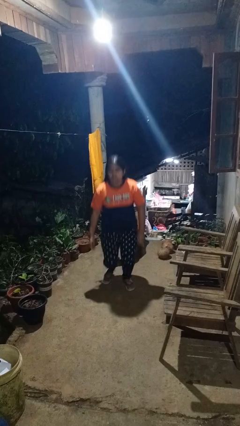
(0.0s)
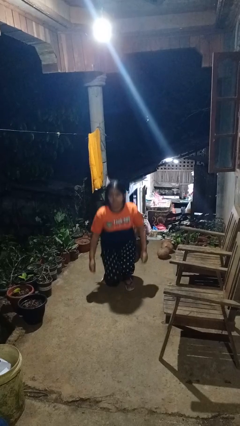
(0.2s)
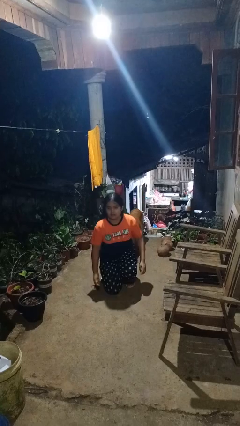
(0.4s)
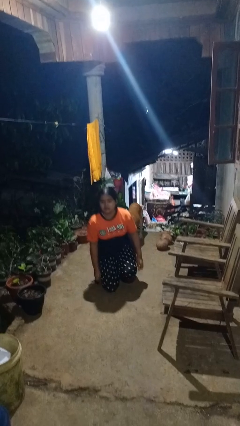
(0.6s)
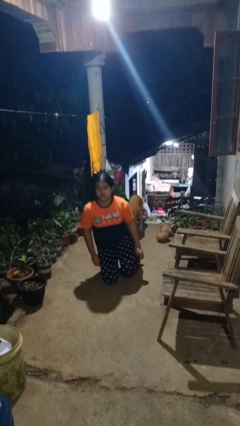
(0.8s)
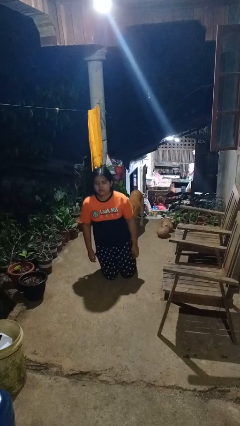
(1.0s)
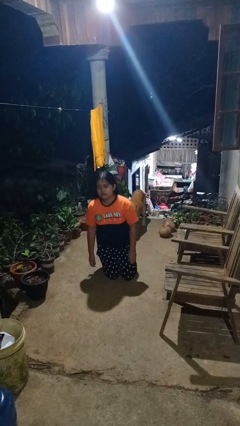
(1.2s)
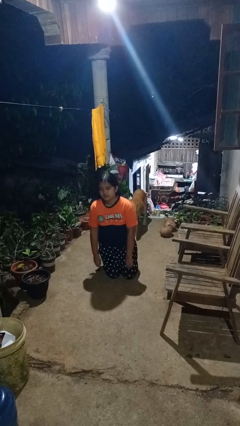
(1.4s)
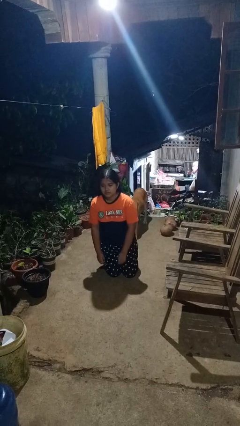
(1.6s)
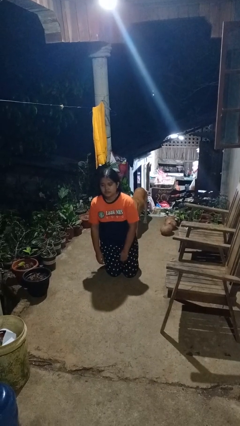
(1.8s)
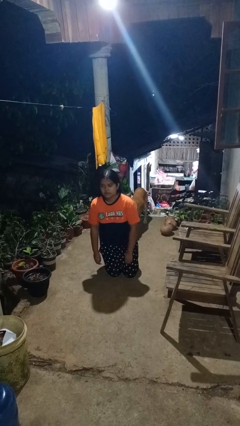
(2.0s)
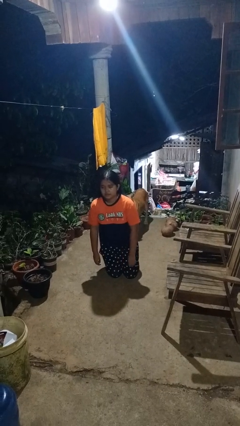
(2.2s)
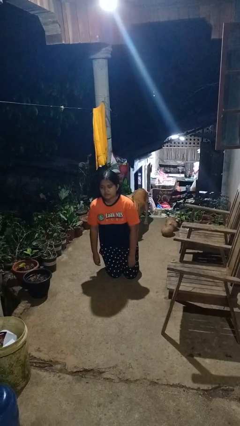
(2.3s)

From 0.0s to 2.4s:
person kneels

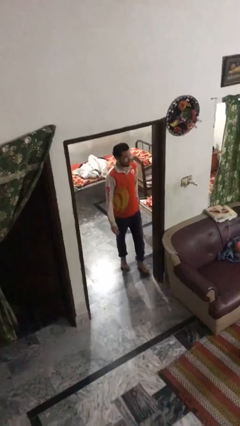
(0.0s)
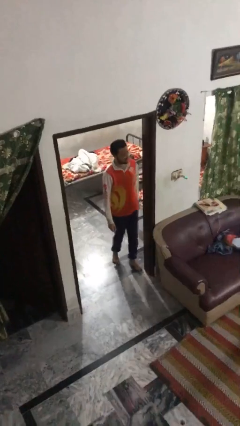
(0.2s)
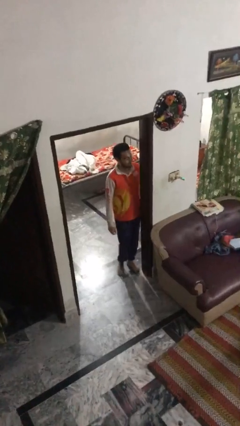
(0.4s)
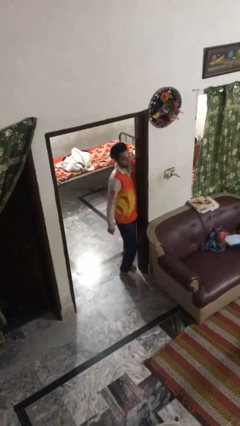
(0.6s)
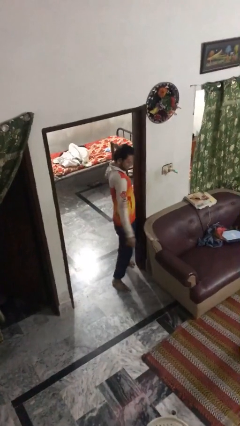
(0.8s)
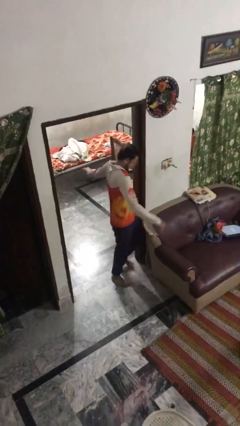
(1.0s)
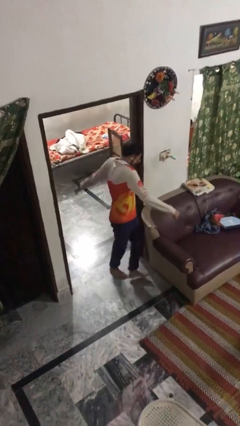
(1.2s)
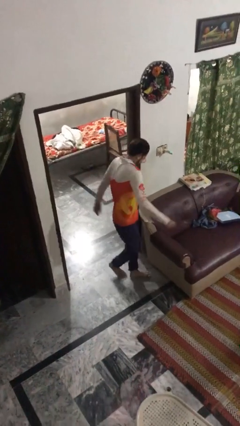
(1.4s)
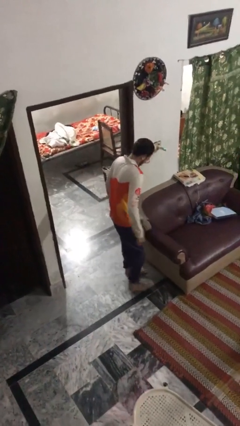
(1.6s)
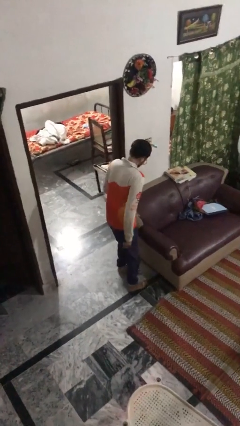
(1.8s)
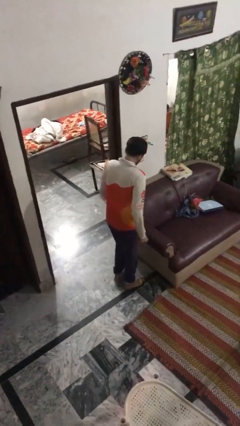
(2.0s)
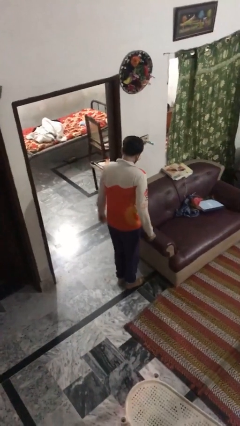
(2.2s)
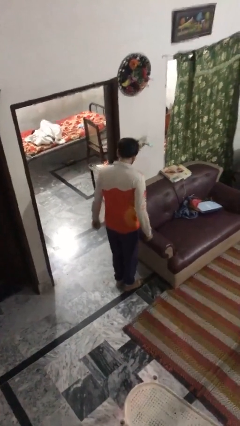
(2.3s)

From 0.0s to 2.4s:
person bumps into wall

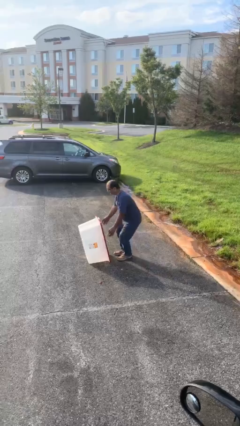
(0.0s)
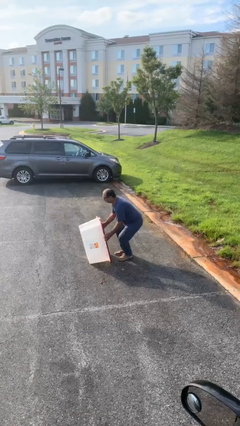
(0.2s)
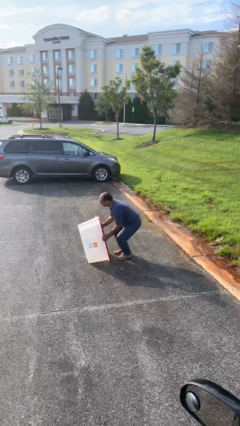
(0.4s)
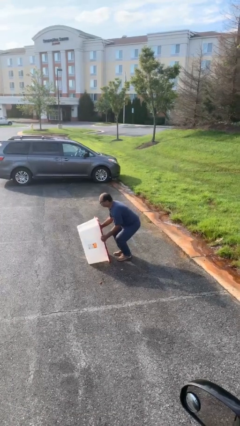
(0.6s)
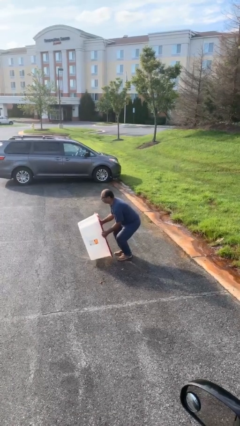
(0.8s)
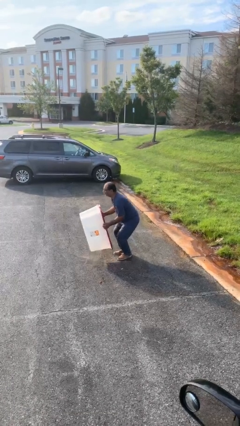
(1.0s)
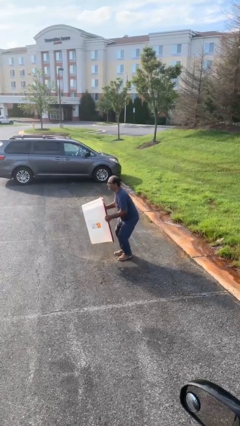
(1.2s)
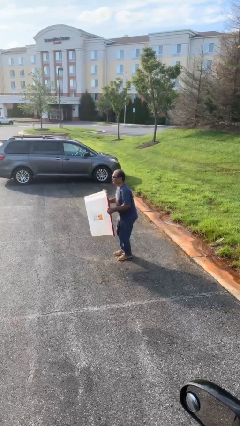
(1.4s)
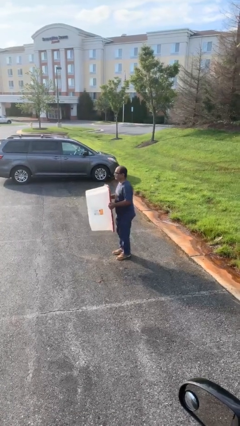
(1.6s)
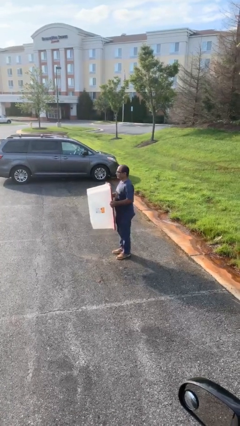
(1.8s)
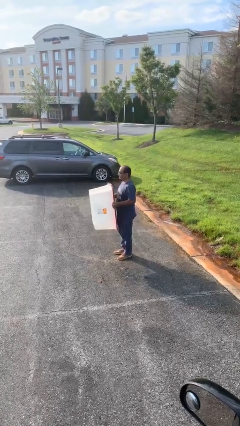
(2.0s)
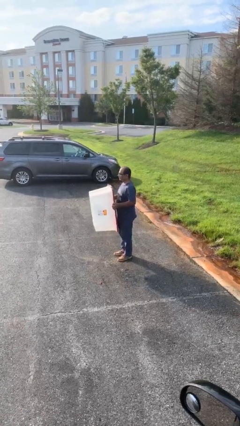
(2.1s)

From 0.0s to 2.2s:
person picks up object from floor

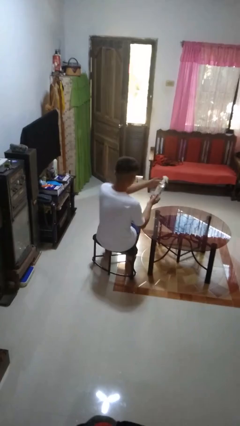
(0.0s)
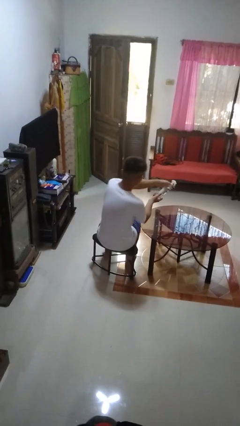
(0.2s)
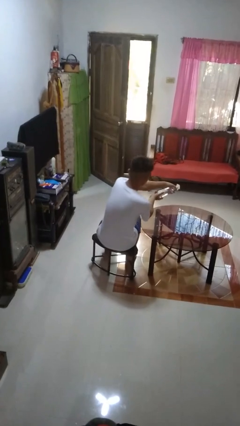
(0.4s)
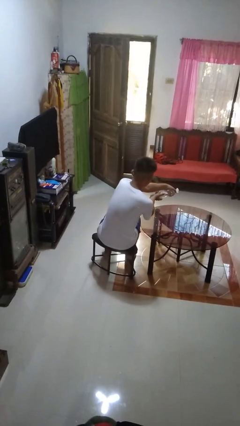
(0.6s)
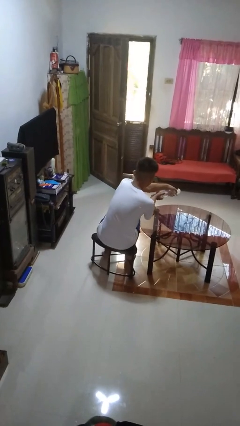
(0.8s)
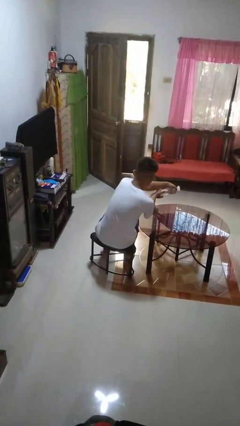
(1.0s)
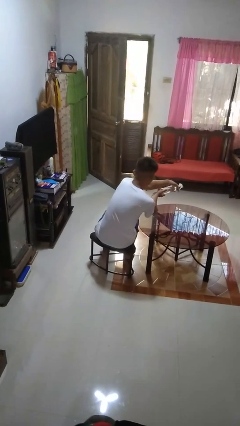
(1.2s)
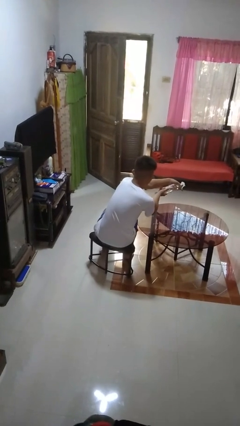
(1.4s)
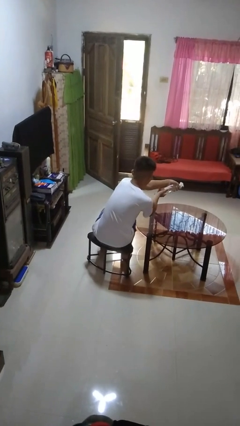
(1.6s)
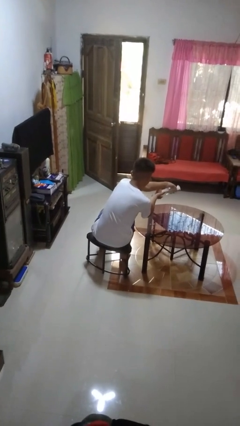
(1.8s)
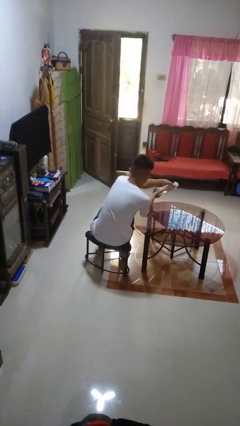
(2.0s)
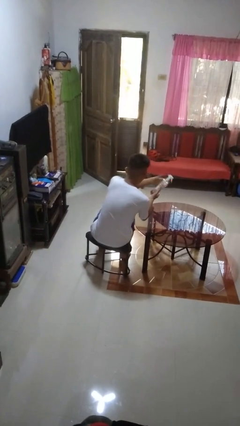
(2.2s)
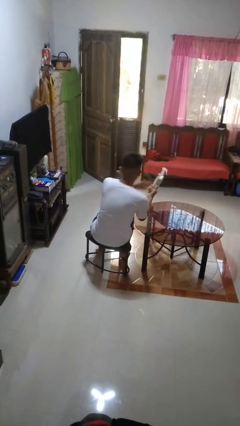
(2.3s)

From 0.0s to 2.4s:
person sprays from bottle

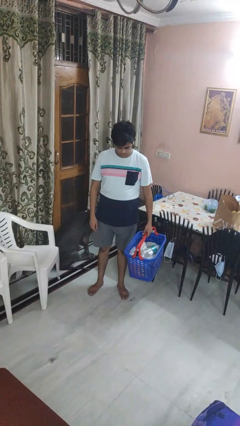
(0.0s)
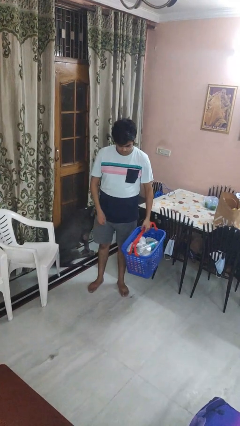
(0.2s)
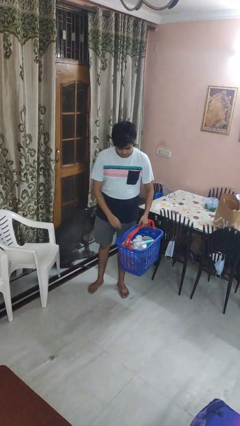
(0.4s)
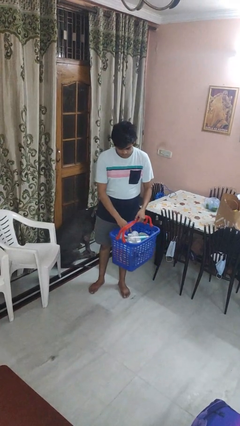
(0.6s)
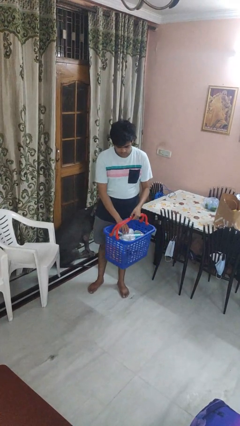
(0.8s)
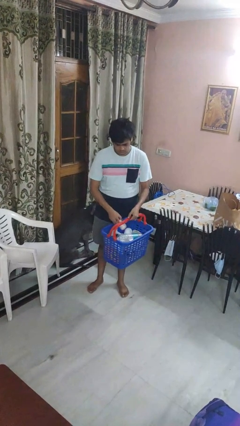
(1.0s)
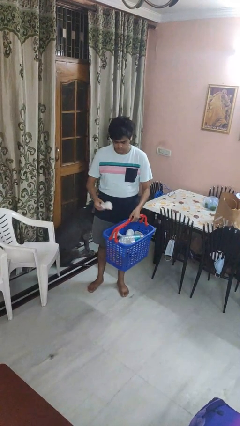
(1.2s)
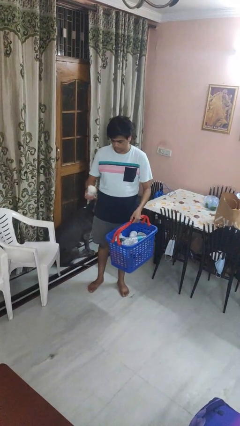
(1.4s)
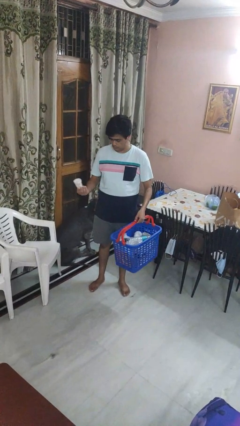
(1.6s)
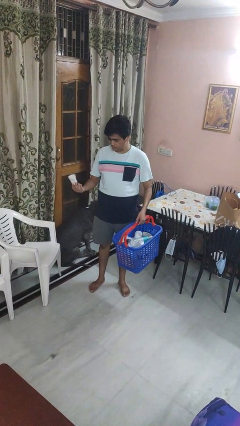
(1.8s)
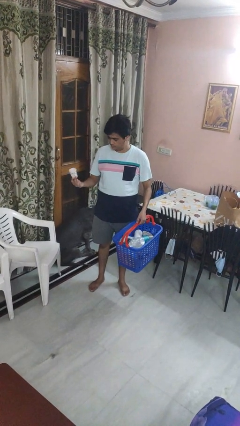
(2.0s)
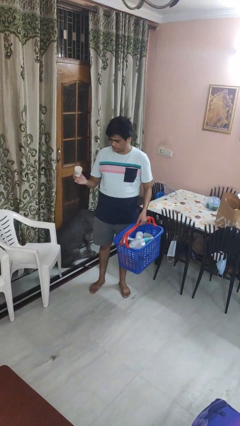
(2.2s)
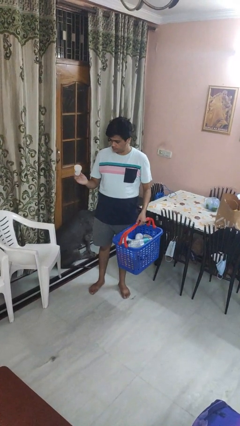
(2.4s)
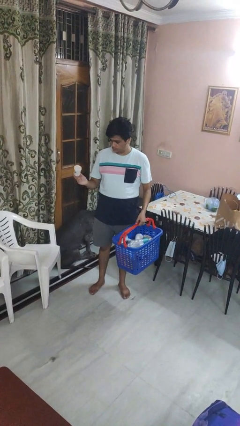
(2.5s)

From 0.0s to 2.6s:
person takes object from basket

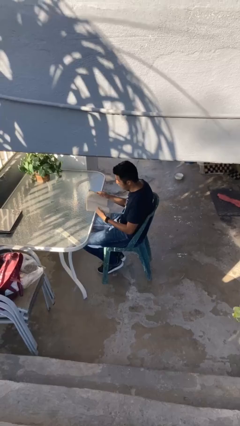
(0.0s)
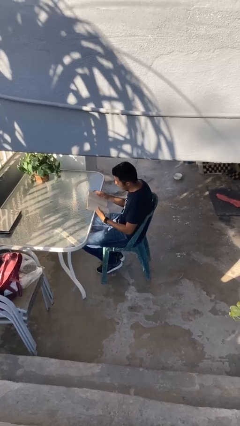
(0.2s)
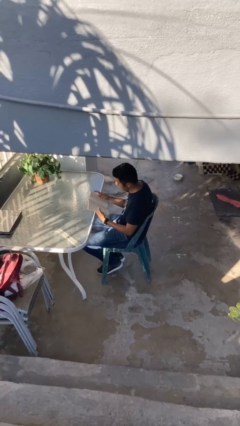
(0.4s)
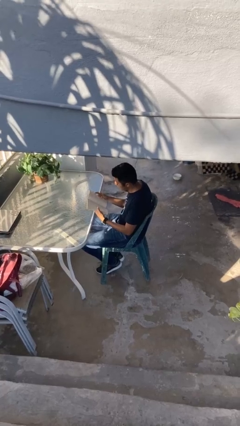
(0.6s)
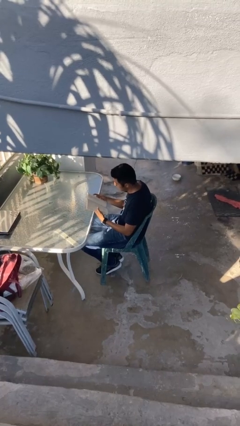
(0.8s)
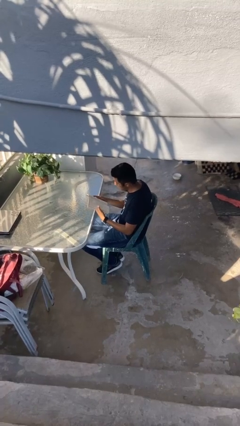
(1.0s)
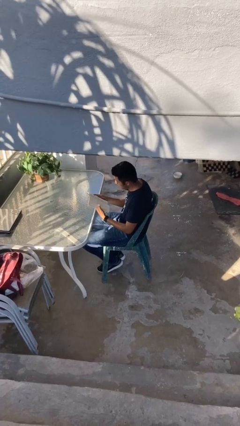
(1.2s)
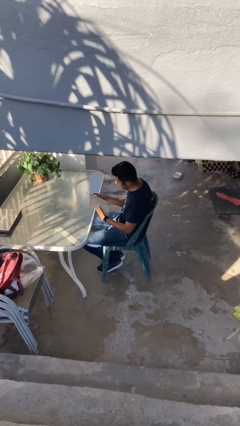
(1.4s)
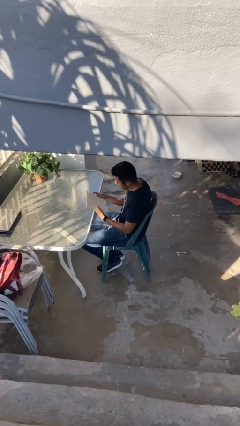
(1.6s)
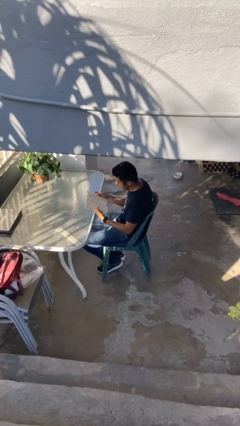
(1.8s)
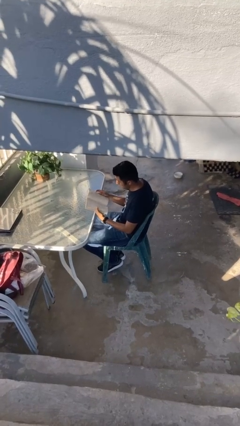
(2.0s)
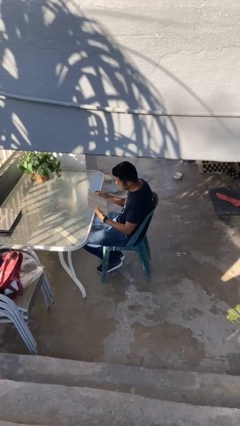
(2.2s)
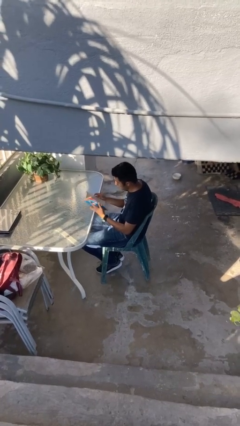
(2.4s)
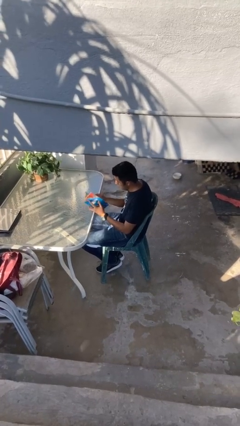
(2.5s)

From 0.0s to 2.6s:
person reads document

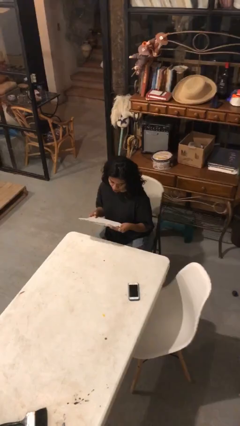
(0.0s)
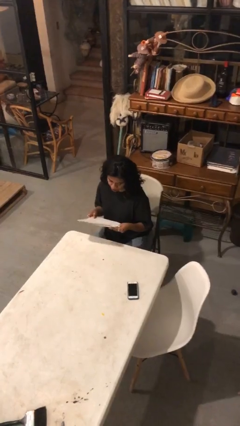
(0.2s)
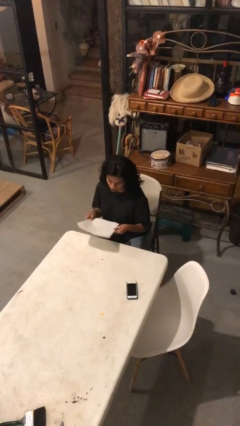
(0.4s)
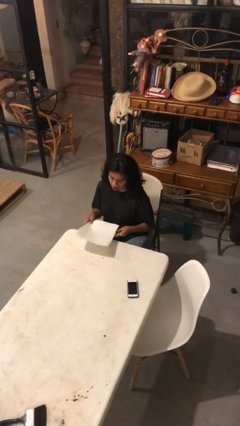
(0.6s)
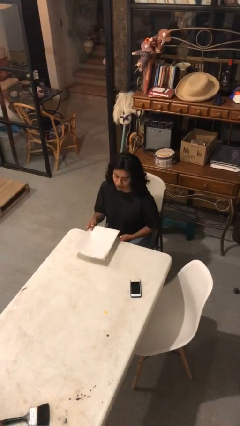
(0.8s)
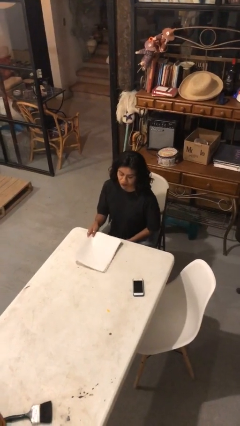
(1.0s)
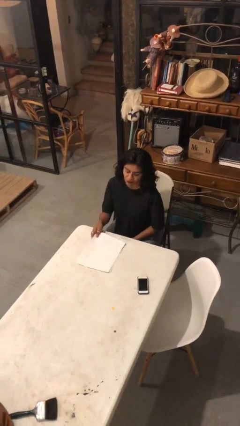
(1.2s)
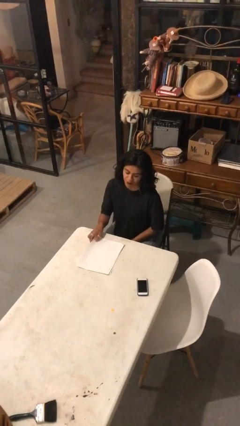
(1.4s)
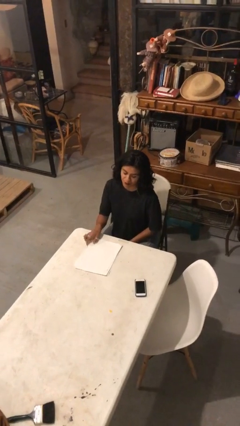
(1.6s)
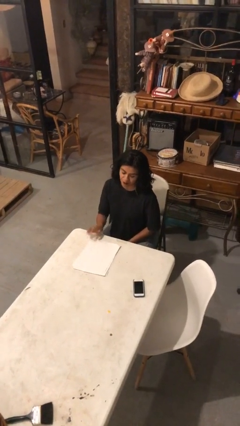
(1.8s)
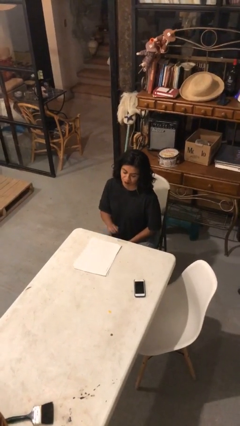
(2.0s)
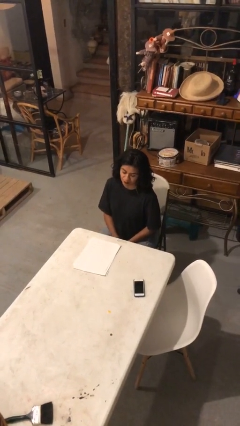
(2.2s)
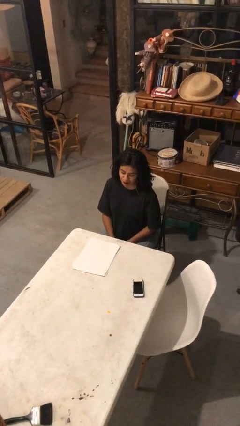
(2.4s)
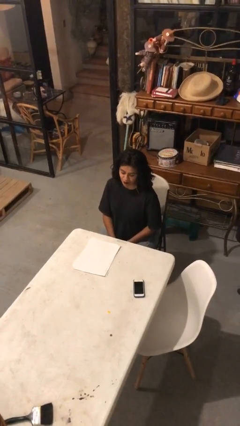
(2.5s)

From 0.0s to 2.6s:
person puts down object on table
